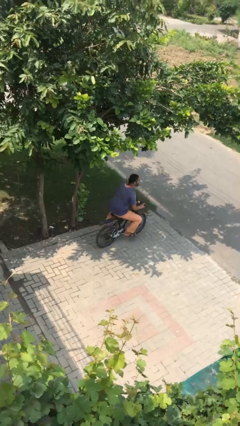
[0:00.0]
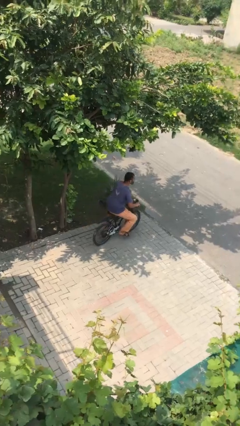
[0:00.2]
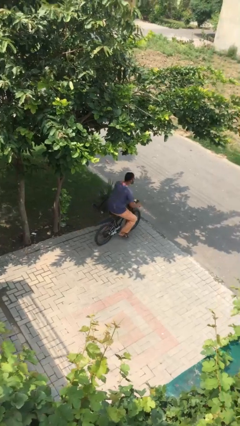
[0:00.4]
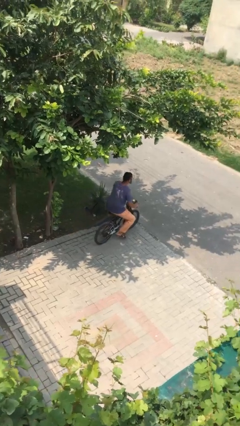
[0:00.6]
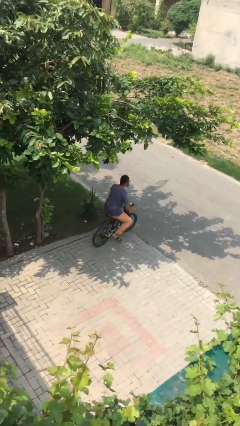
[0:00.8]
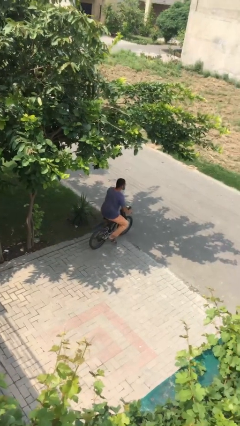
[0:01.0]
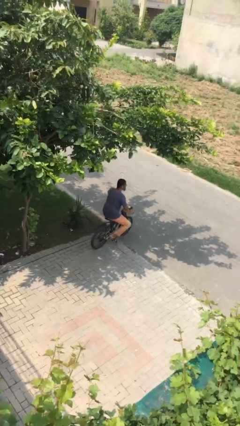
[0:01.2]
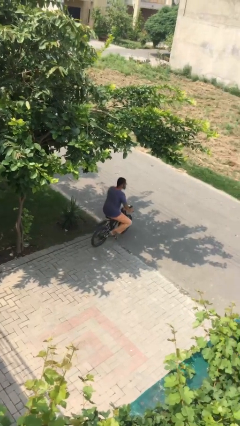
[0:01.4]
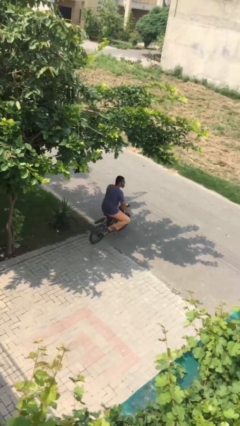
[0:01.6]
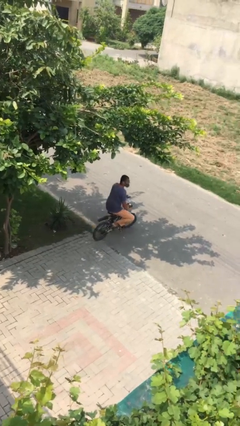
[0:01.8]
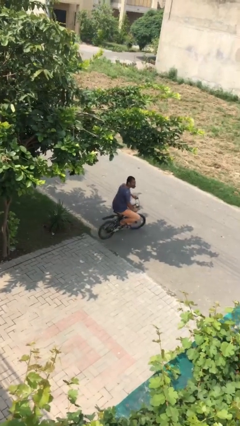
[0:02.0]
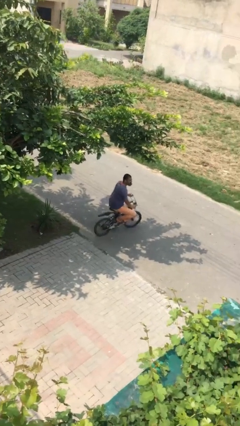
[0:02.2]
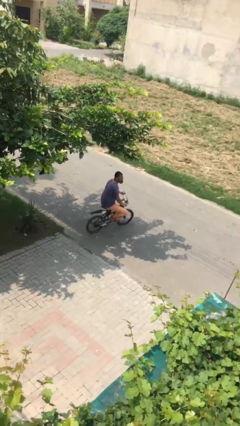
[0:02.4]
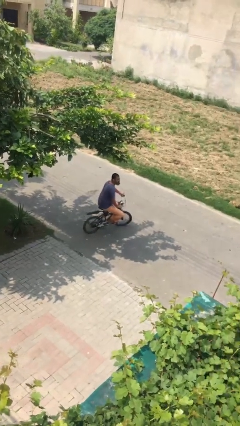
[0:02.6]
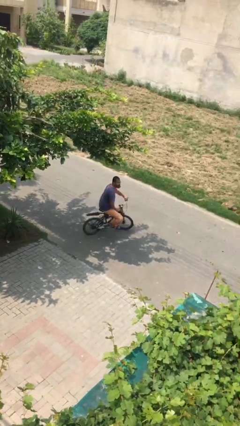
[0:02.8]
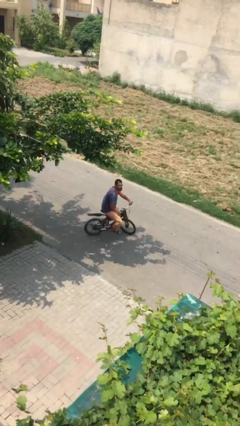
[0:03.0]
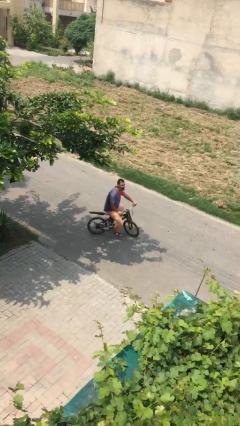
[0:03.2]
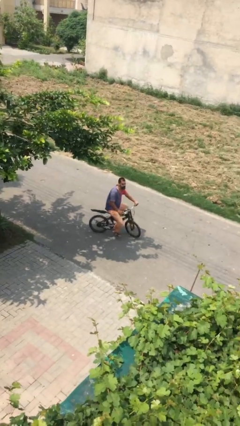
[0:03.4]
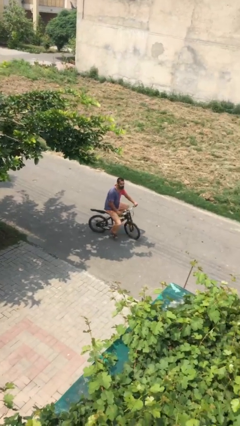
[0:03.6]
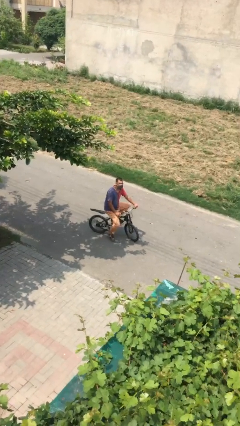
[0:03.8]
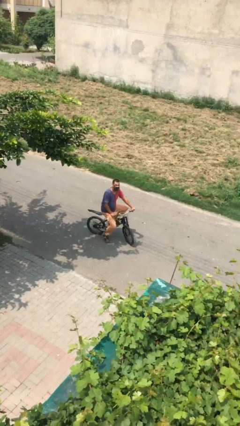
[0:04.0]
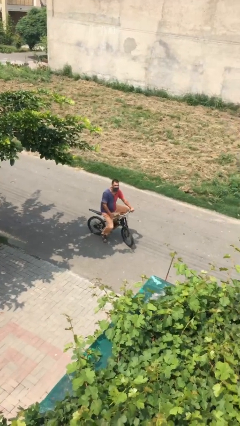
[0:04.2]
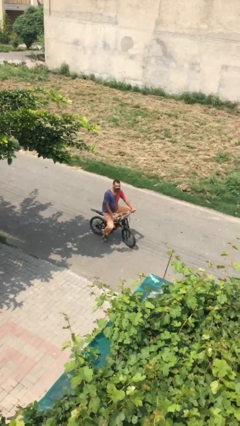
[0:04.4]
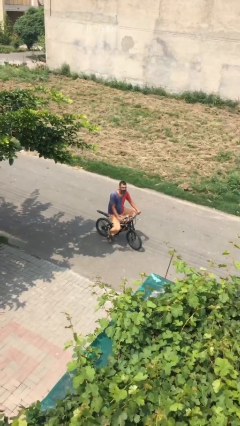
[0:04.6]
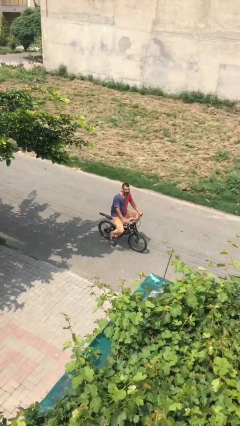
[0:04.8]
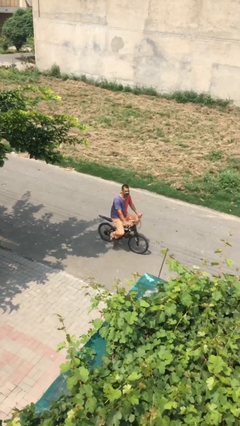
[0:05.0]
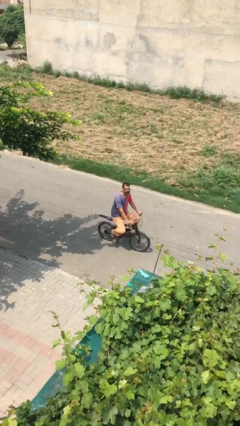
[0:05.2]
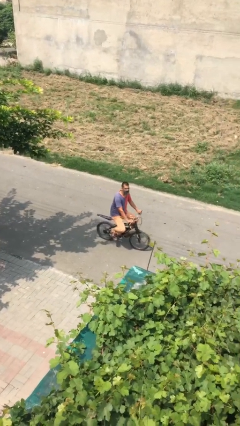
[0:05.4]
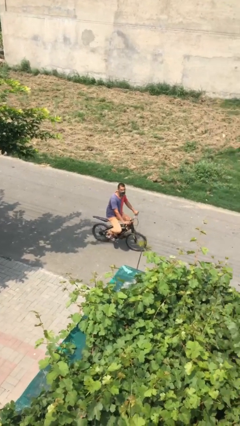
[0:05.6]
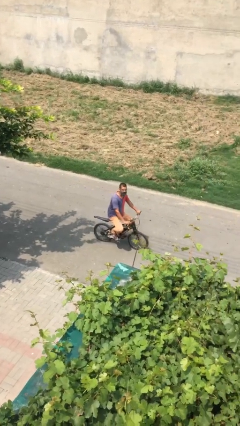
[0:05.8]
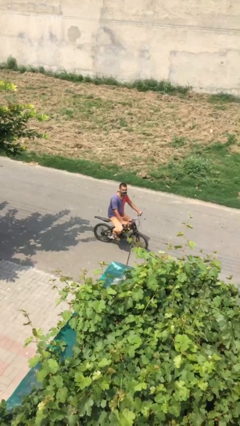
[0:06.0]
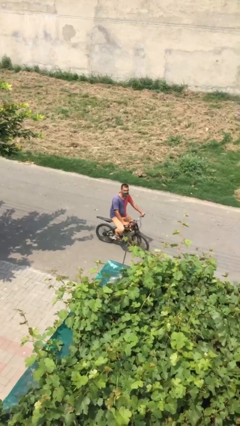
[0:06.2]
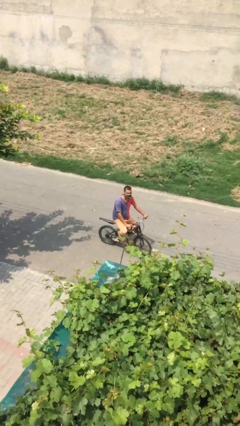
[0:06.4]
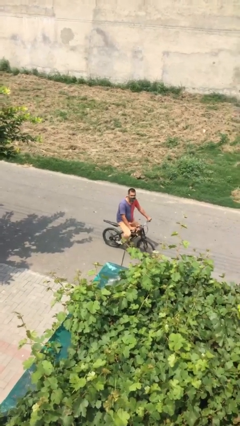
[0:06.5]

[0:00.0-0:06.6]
person rides bicycle

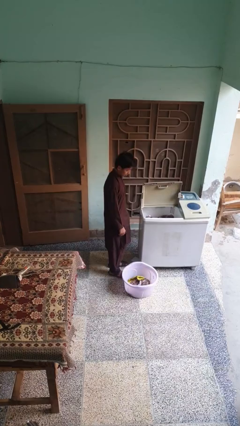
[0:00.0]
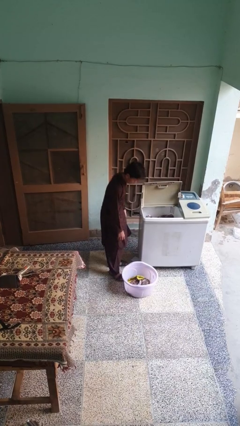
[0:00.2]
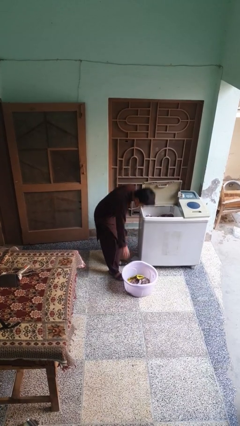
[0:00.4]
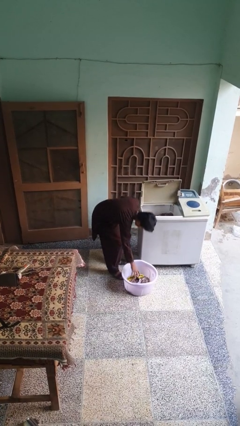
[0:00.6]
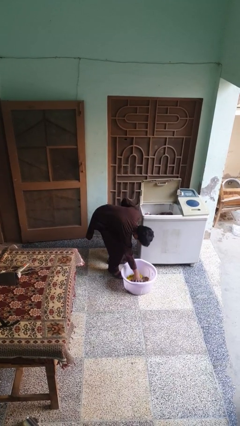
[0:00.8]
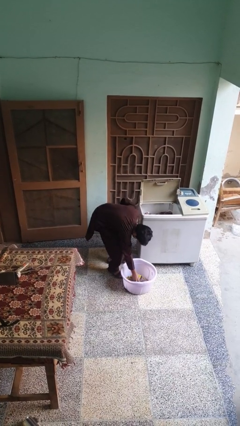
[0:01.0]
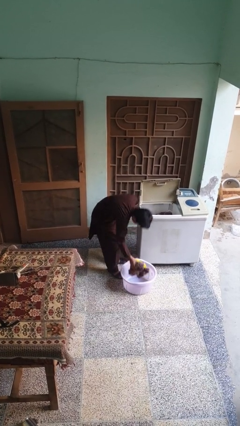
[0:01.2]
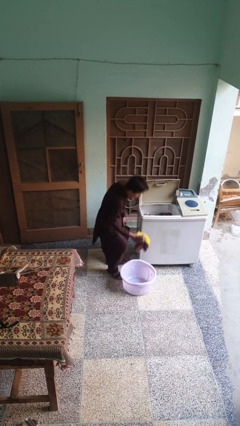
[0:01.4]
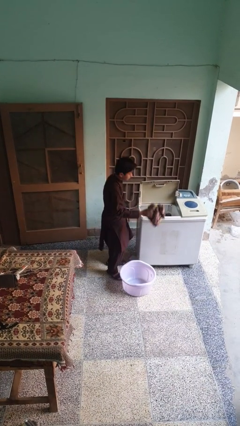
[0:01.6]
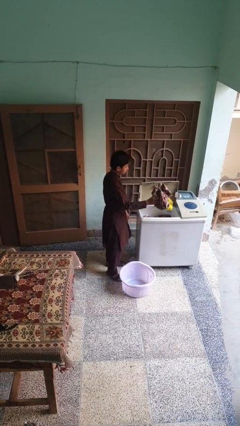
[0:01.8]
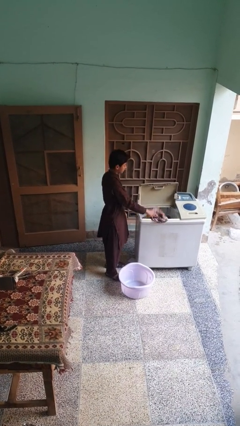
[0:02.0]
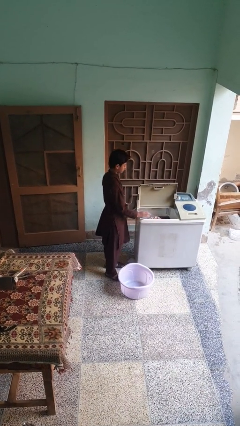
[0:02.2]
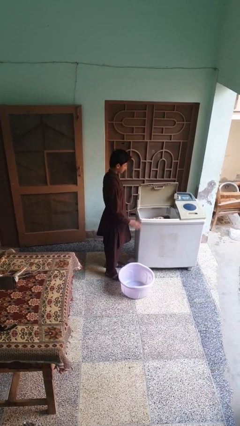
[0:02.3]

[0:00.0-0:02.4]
person unloads clotheswasher

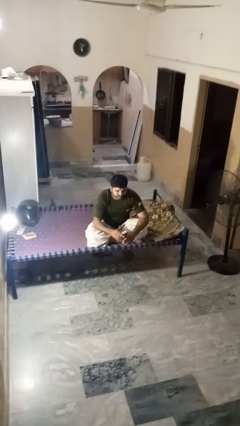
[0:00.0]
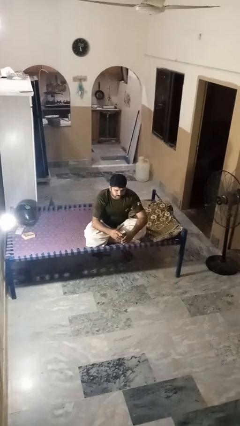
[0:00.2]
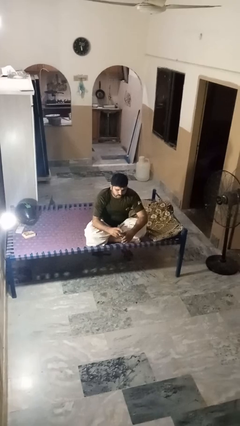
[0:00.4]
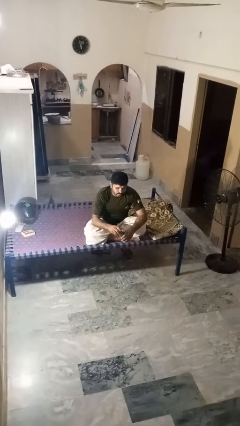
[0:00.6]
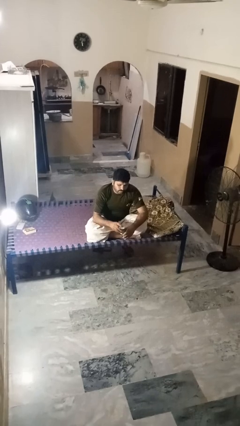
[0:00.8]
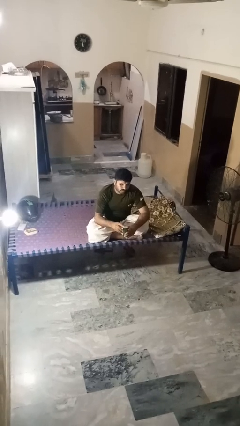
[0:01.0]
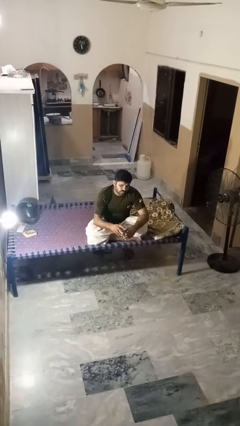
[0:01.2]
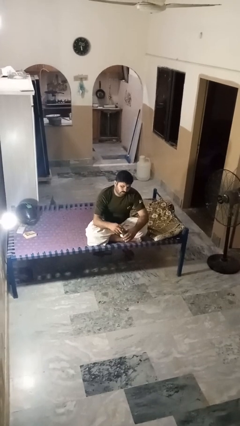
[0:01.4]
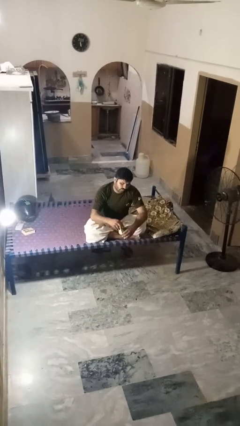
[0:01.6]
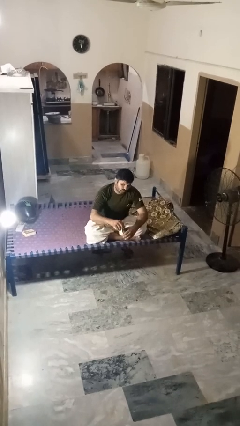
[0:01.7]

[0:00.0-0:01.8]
person opens beverage can

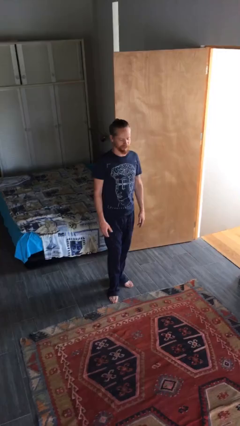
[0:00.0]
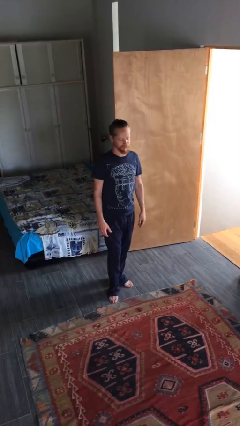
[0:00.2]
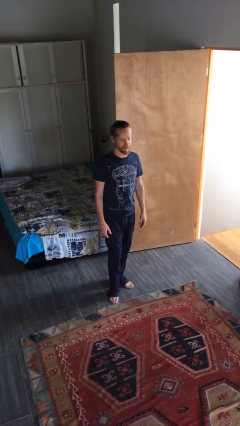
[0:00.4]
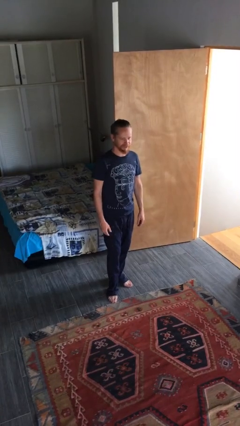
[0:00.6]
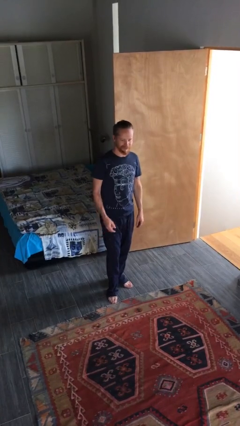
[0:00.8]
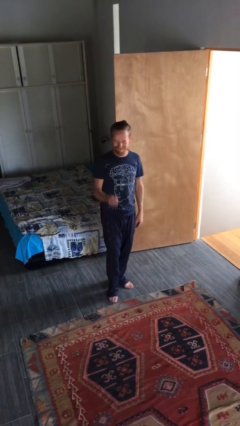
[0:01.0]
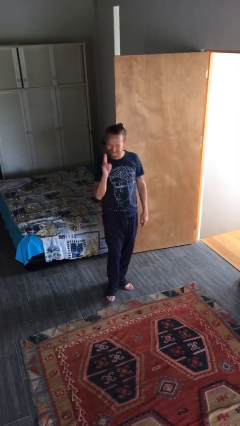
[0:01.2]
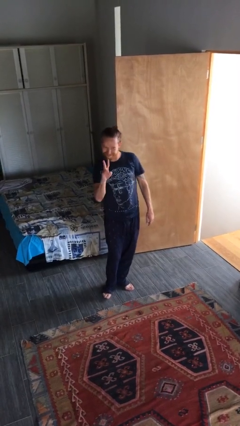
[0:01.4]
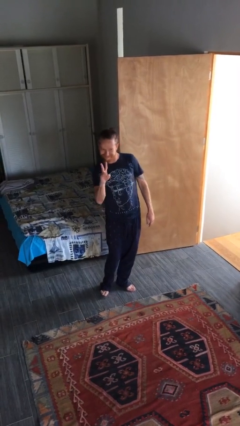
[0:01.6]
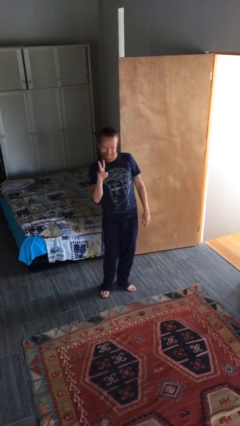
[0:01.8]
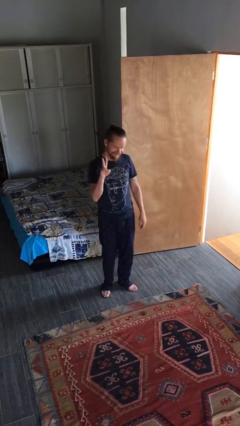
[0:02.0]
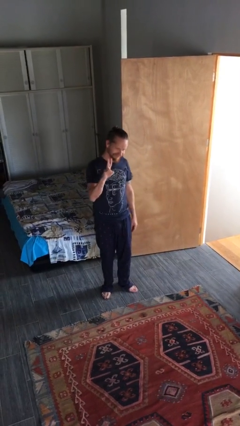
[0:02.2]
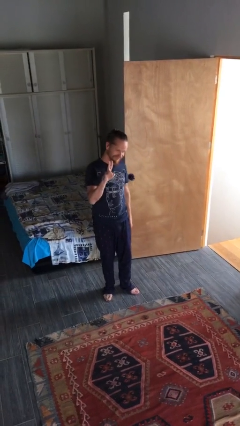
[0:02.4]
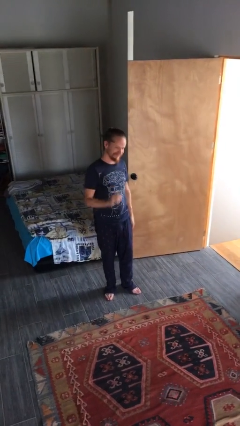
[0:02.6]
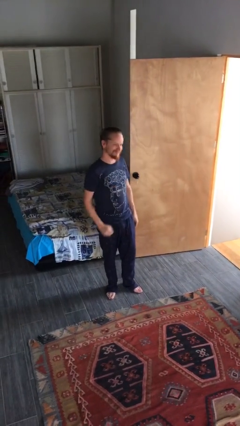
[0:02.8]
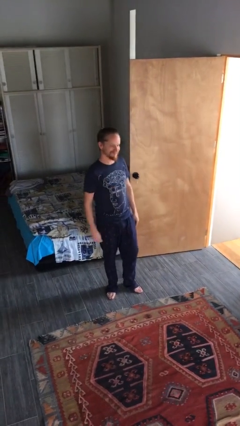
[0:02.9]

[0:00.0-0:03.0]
person gestures peace

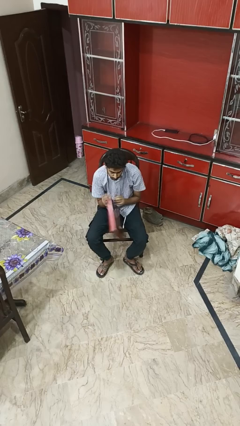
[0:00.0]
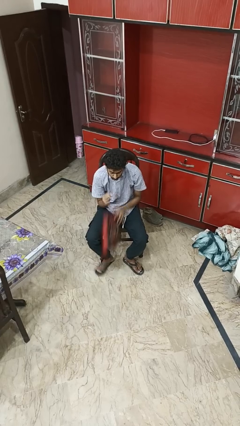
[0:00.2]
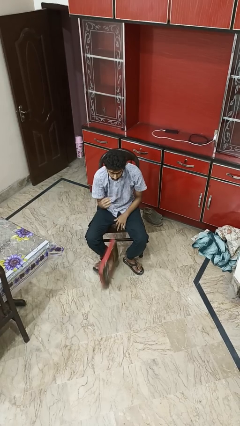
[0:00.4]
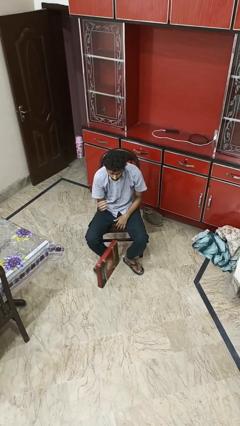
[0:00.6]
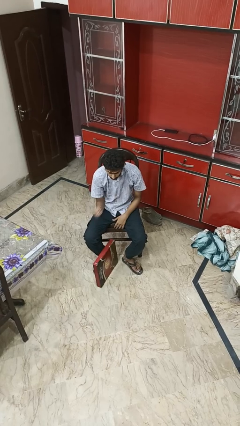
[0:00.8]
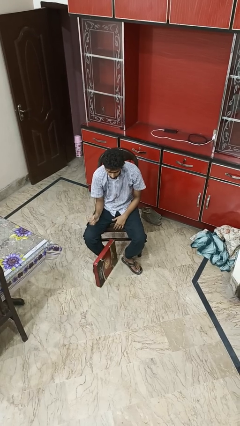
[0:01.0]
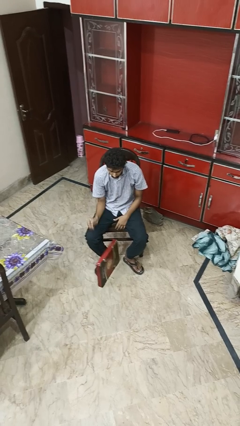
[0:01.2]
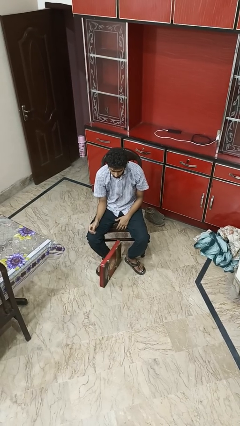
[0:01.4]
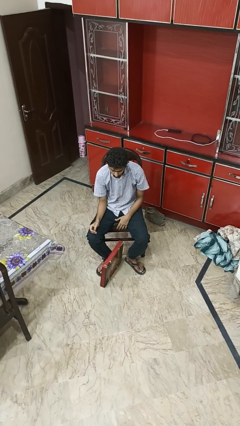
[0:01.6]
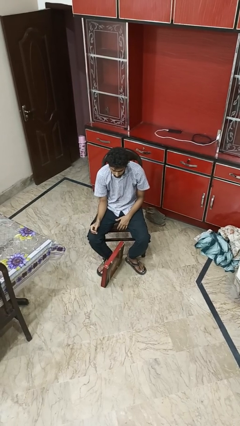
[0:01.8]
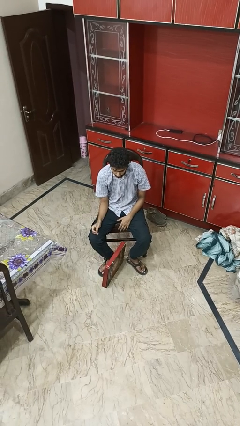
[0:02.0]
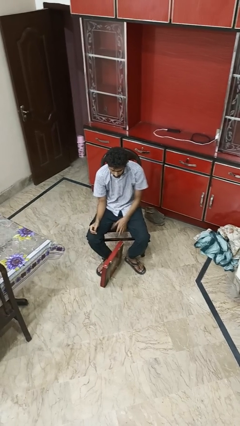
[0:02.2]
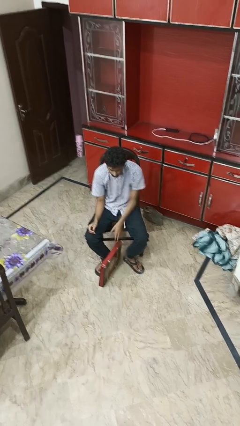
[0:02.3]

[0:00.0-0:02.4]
person drops object

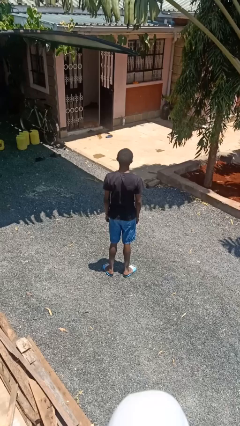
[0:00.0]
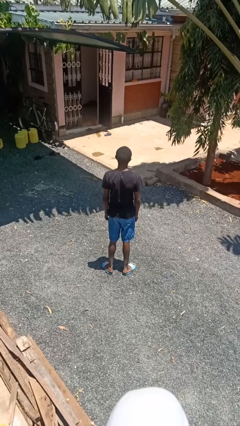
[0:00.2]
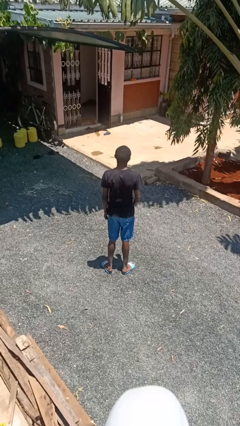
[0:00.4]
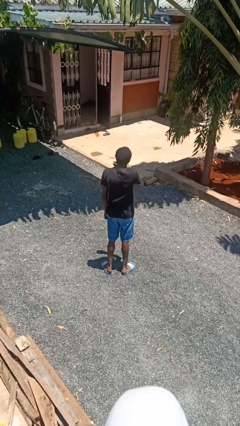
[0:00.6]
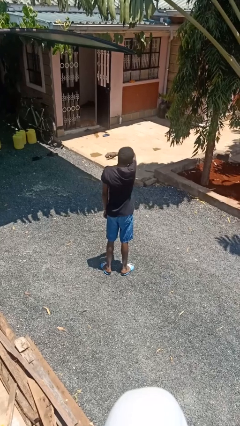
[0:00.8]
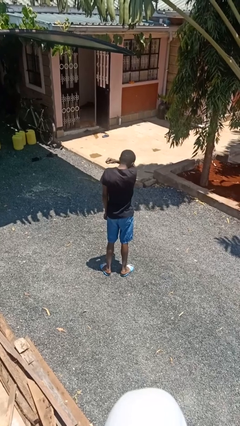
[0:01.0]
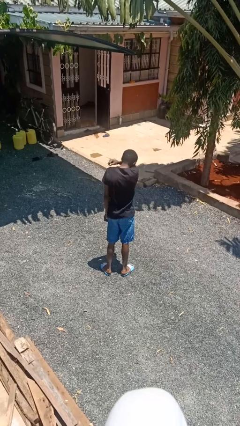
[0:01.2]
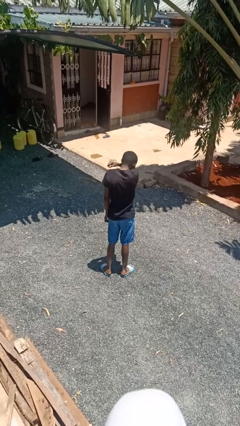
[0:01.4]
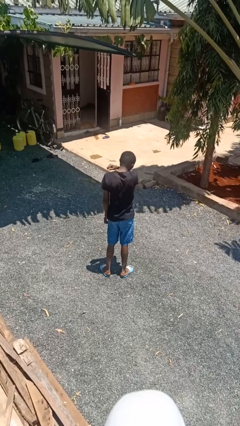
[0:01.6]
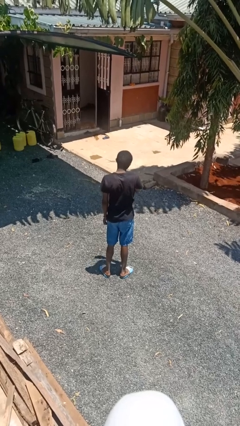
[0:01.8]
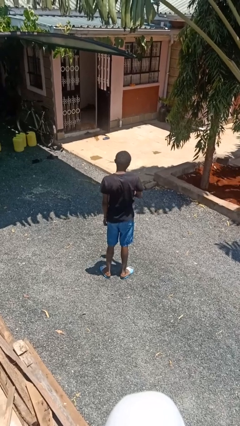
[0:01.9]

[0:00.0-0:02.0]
person sneezes into arm
